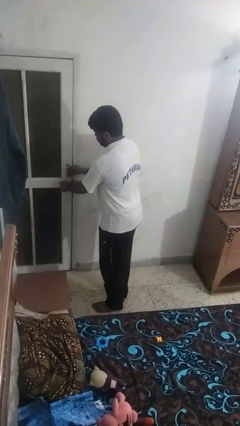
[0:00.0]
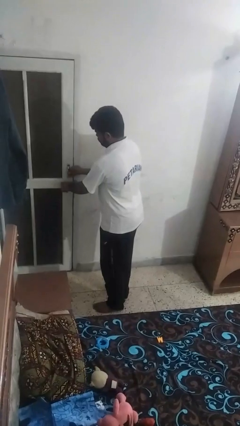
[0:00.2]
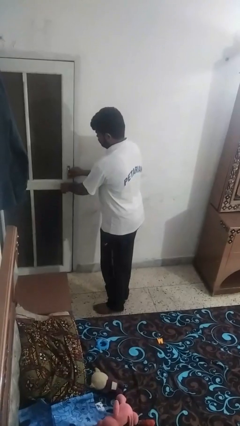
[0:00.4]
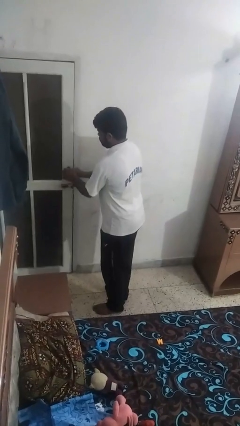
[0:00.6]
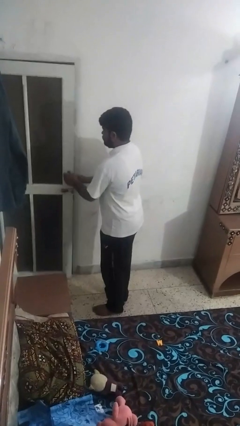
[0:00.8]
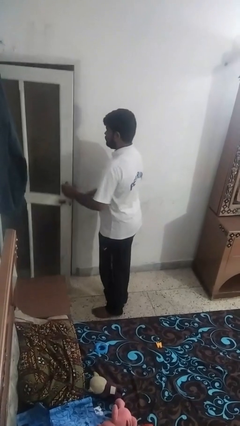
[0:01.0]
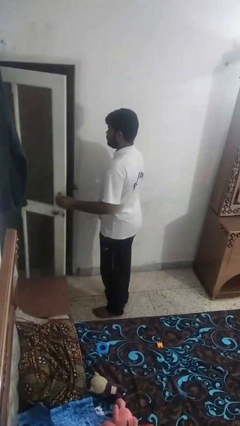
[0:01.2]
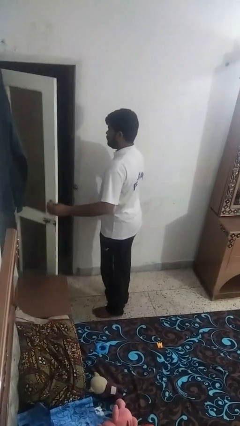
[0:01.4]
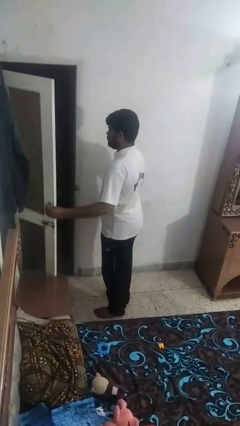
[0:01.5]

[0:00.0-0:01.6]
person opens facility door

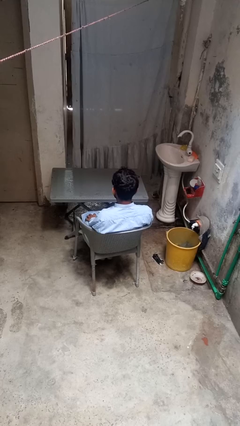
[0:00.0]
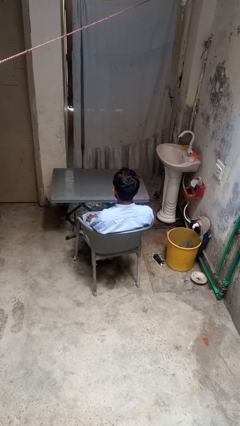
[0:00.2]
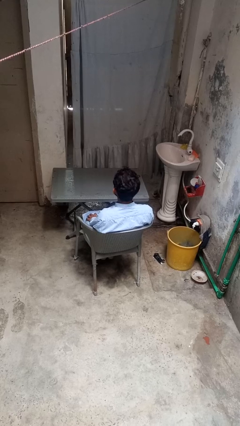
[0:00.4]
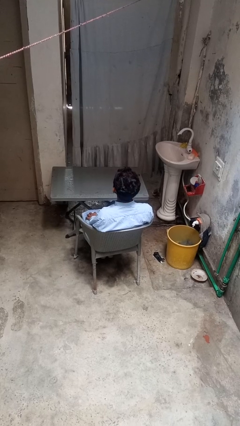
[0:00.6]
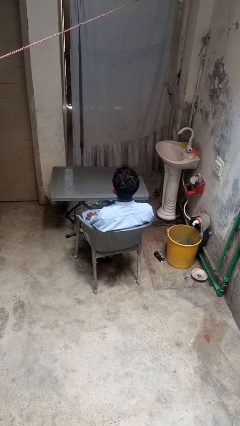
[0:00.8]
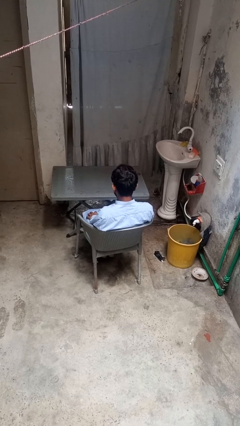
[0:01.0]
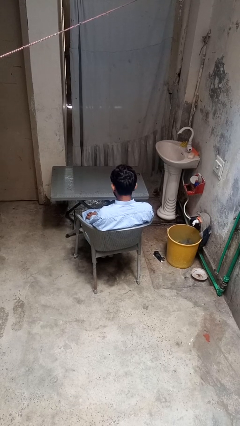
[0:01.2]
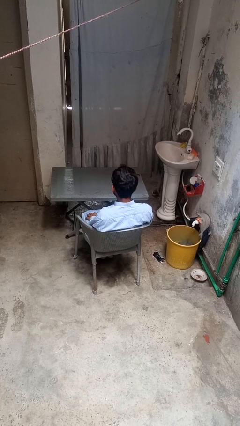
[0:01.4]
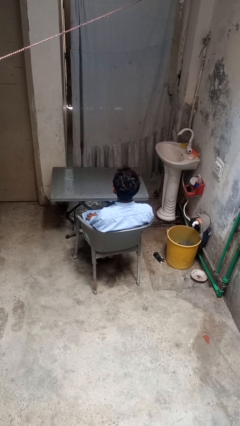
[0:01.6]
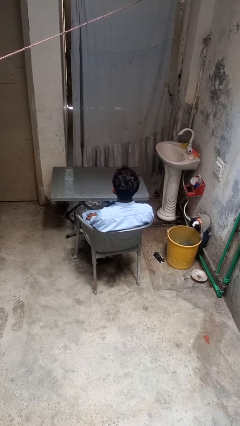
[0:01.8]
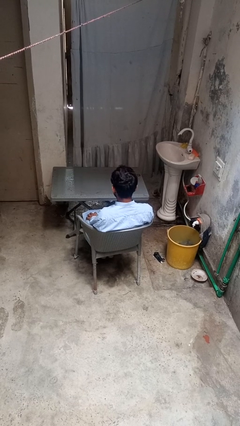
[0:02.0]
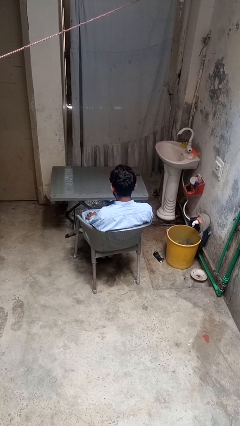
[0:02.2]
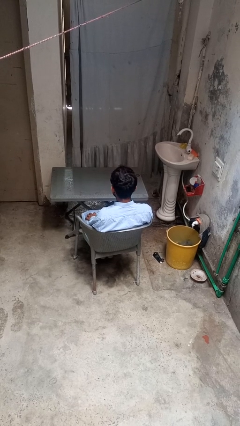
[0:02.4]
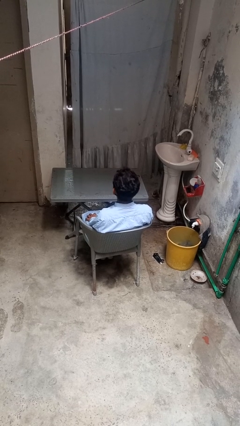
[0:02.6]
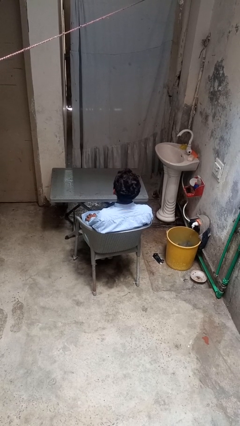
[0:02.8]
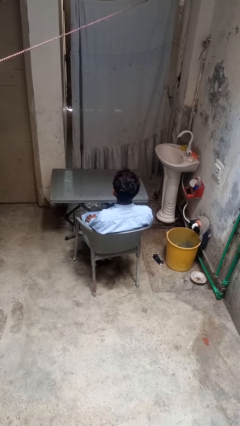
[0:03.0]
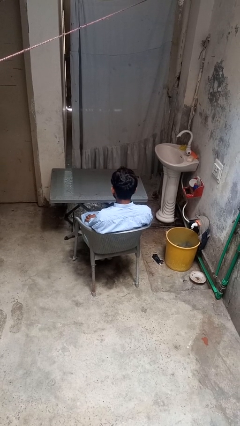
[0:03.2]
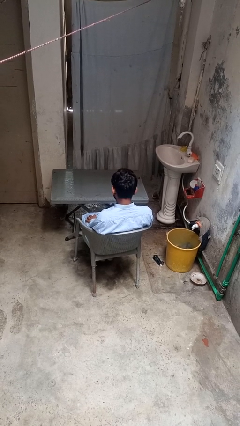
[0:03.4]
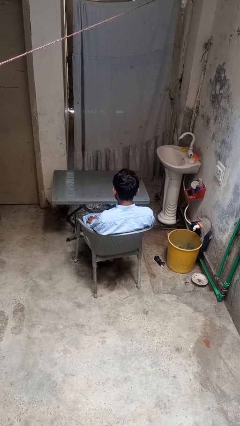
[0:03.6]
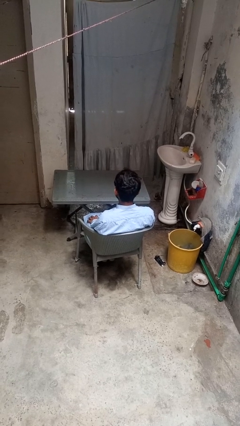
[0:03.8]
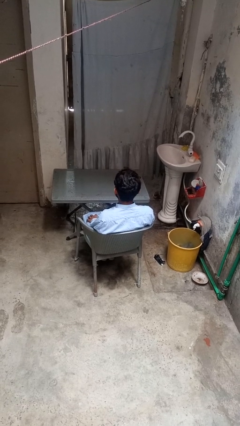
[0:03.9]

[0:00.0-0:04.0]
person nods head

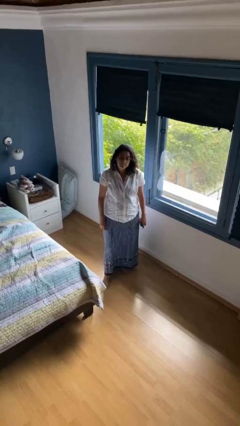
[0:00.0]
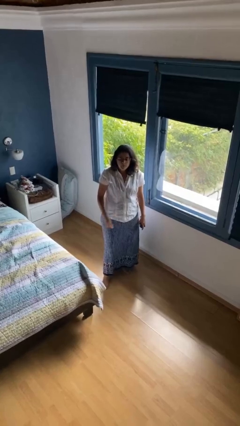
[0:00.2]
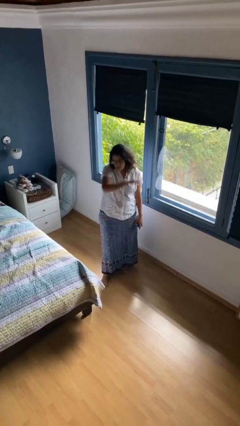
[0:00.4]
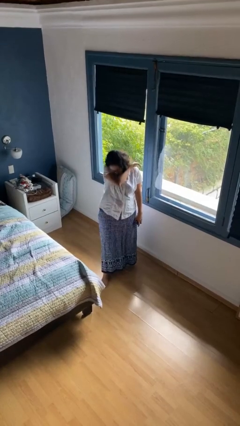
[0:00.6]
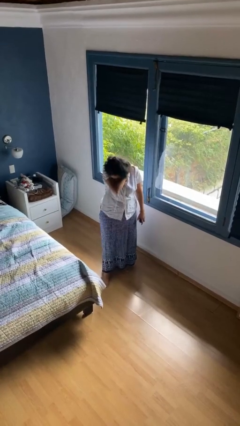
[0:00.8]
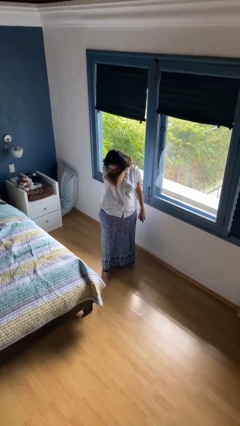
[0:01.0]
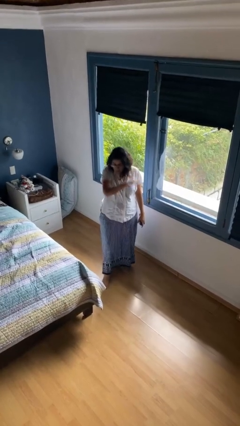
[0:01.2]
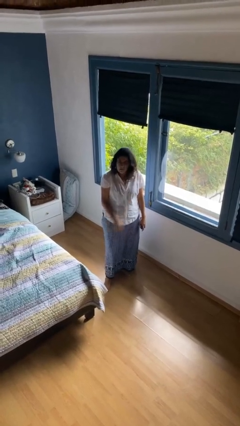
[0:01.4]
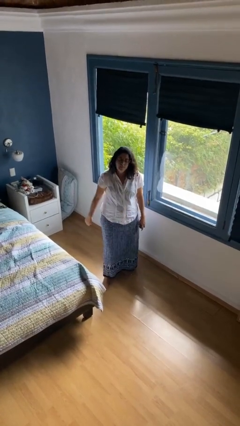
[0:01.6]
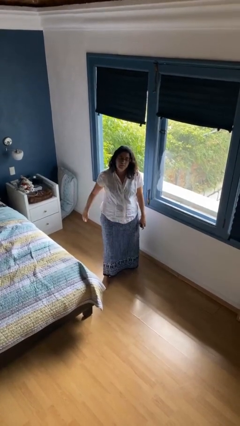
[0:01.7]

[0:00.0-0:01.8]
person sneezes into arm

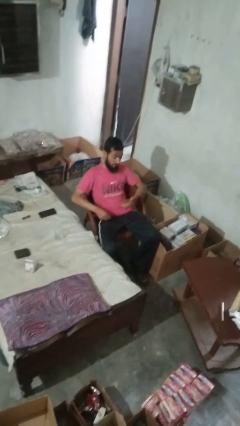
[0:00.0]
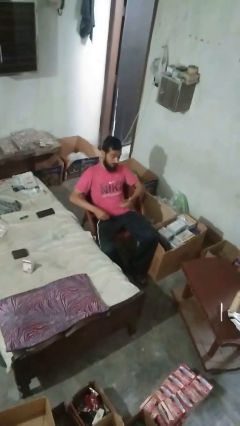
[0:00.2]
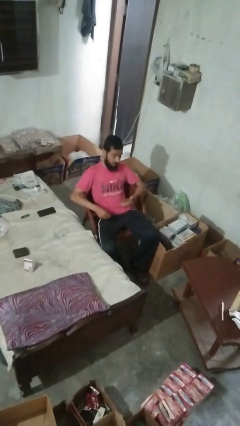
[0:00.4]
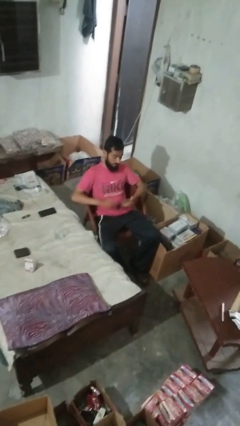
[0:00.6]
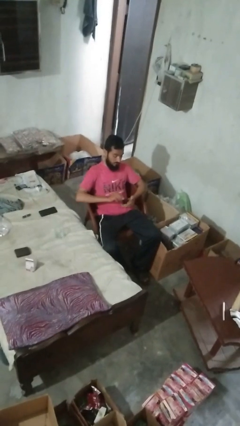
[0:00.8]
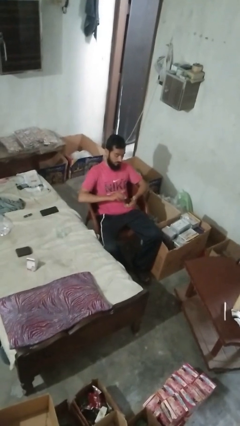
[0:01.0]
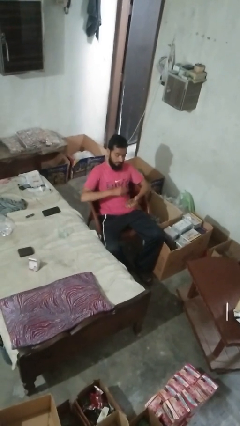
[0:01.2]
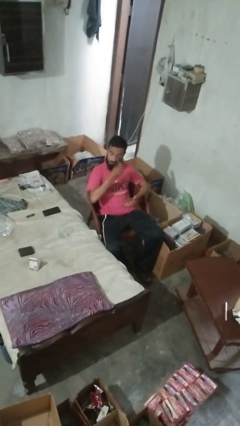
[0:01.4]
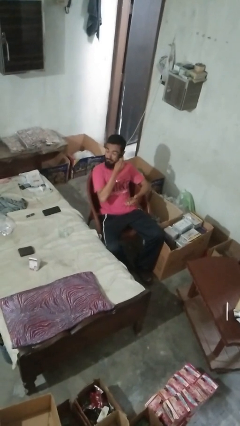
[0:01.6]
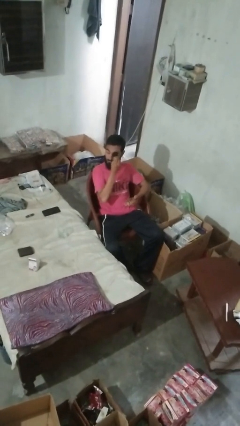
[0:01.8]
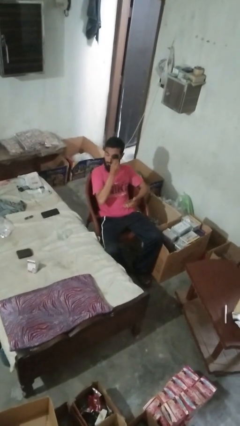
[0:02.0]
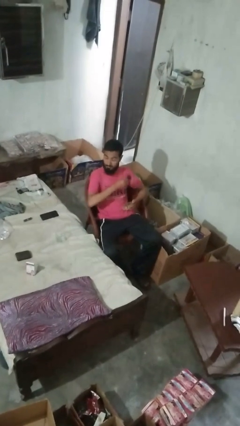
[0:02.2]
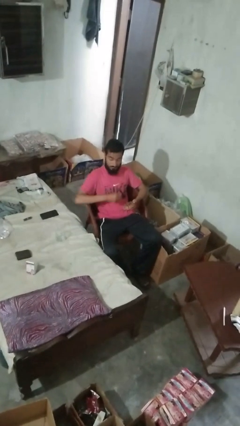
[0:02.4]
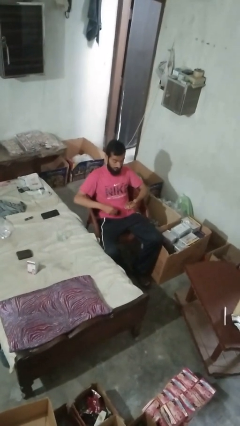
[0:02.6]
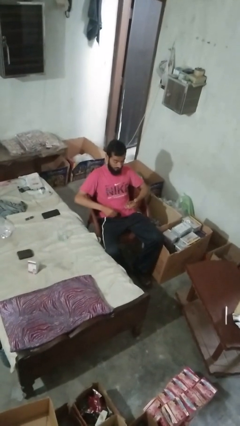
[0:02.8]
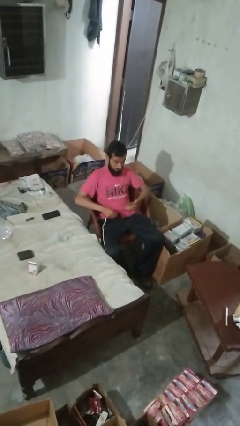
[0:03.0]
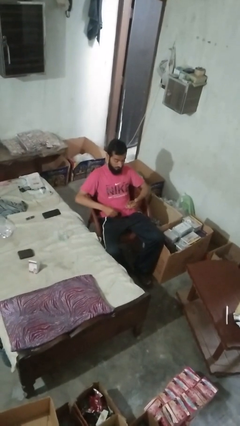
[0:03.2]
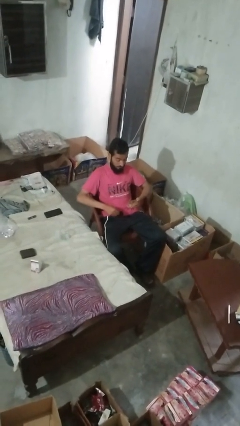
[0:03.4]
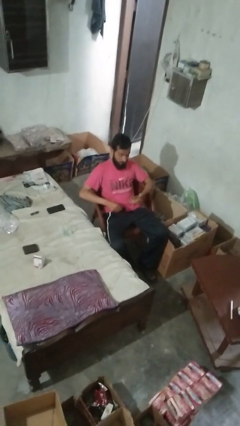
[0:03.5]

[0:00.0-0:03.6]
person applies eye makeup

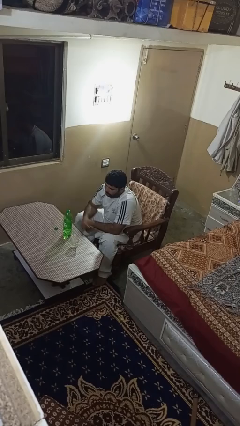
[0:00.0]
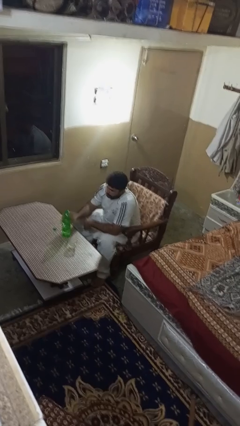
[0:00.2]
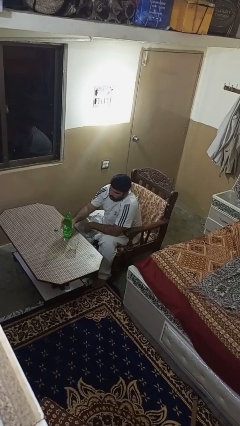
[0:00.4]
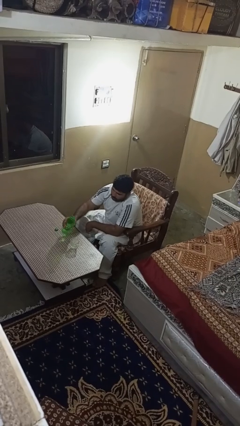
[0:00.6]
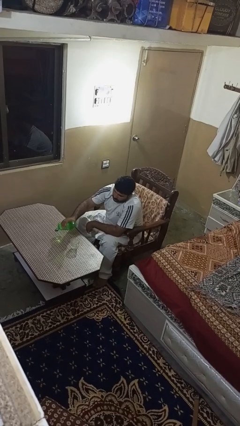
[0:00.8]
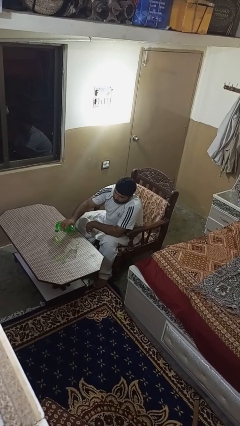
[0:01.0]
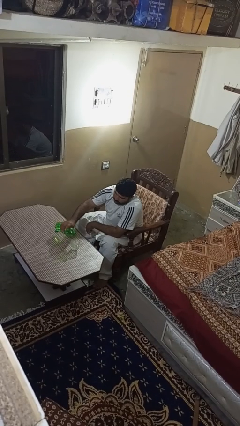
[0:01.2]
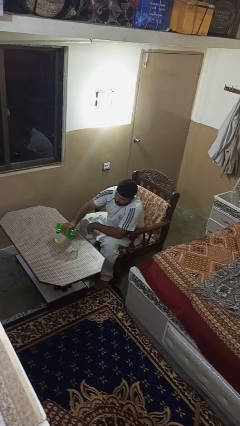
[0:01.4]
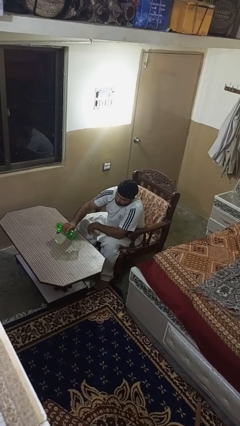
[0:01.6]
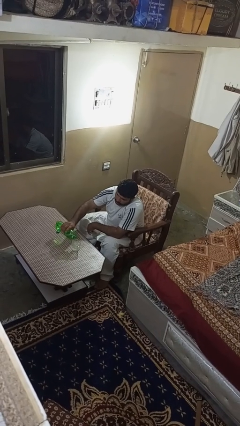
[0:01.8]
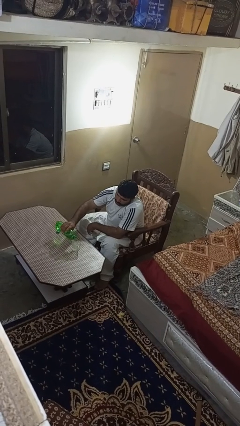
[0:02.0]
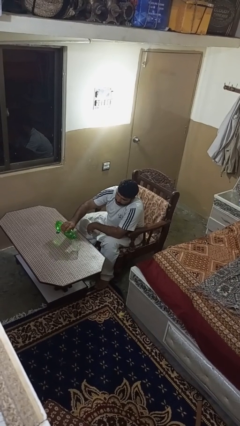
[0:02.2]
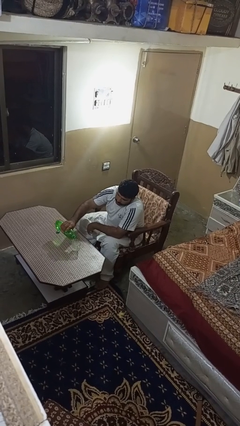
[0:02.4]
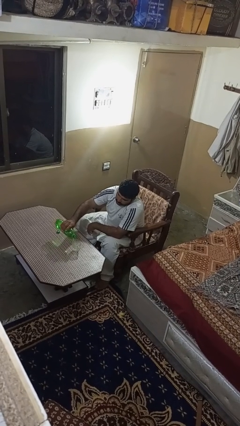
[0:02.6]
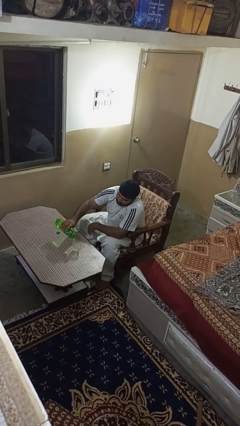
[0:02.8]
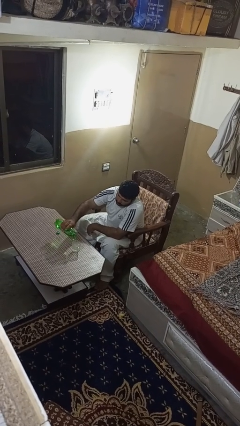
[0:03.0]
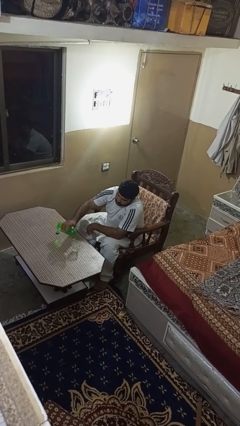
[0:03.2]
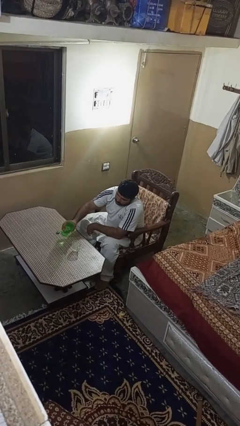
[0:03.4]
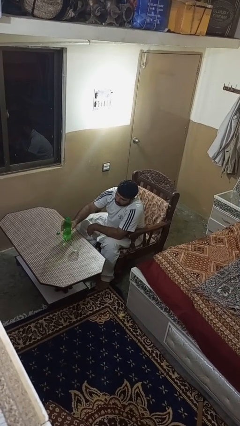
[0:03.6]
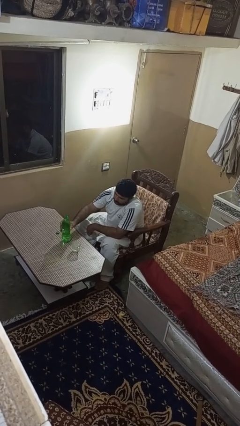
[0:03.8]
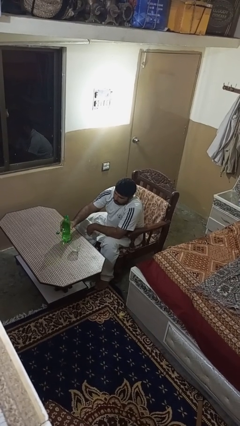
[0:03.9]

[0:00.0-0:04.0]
person pours liquid into cup

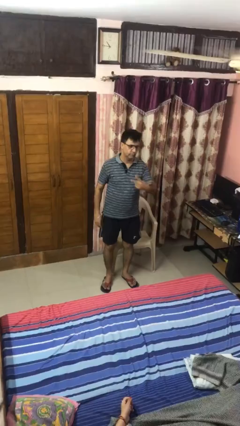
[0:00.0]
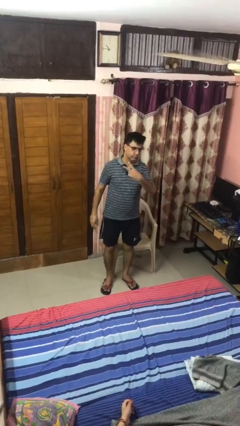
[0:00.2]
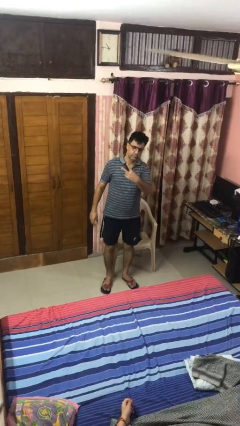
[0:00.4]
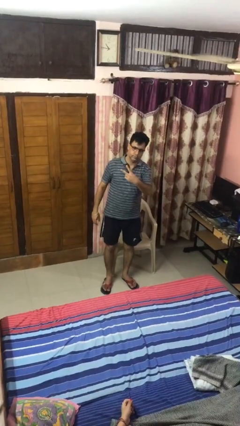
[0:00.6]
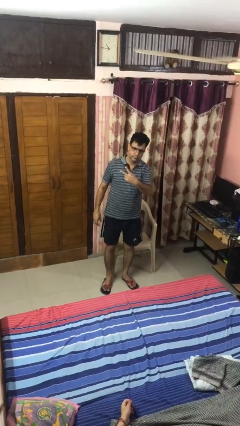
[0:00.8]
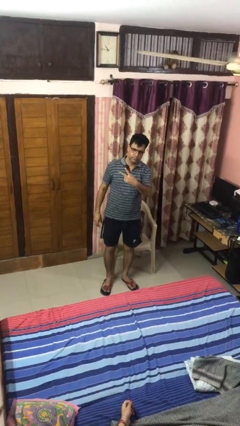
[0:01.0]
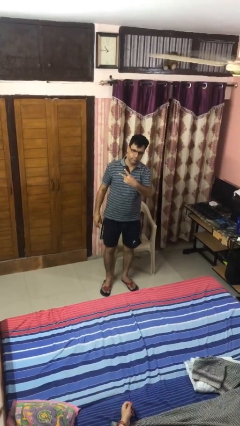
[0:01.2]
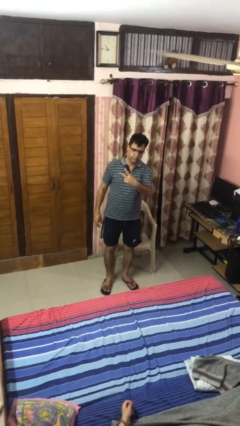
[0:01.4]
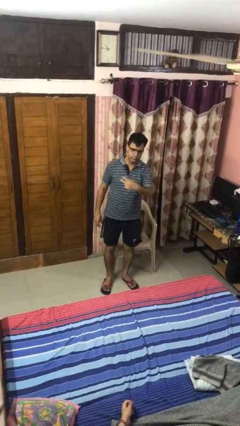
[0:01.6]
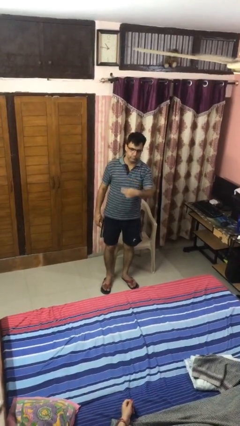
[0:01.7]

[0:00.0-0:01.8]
person gestures peace

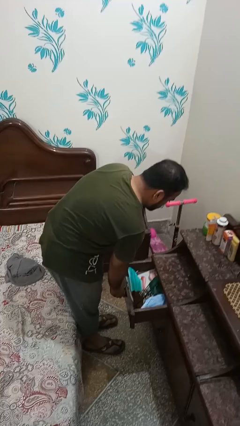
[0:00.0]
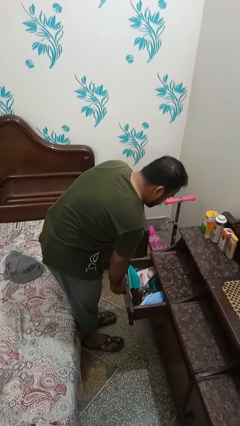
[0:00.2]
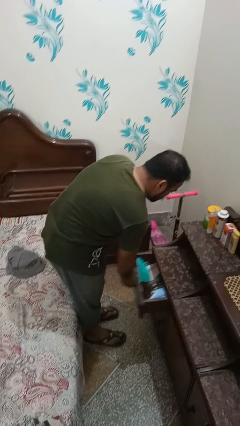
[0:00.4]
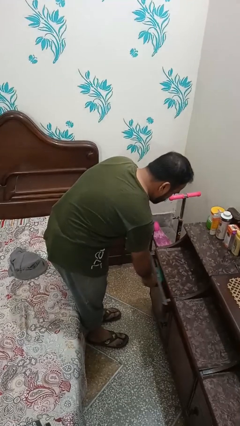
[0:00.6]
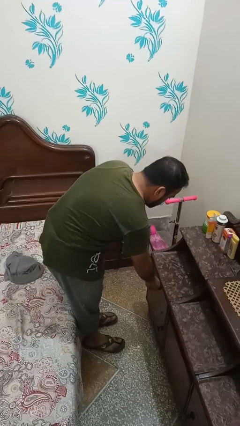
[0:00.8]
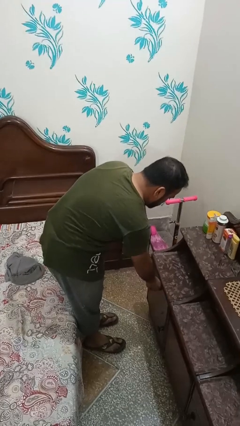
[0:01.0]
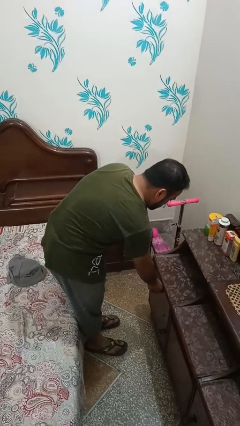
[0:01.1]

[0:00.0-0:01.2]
person closes dresser drawer
